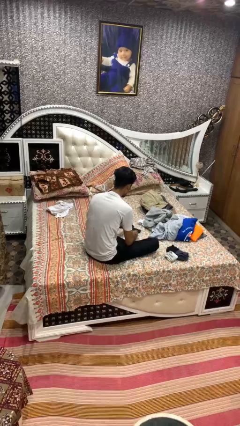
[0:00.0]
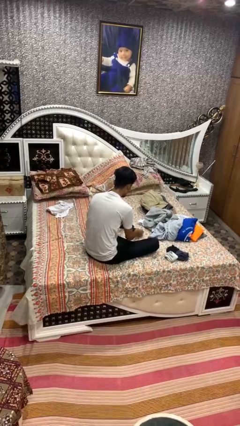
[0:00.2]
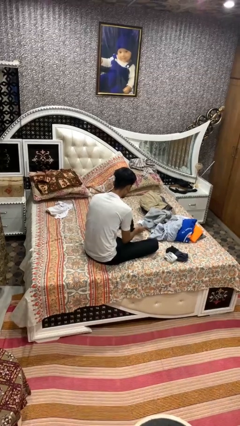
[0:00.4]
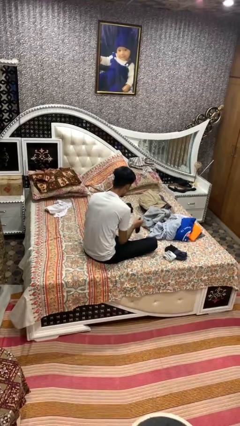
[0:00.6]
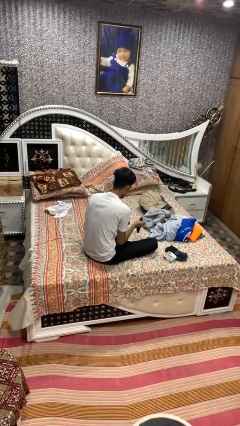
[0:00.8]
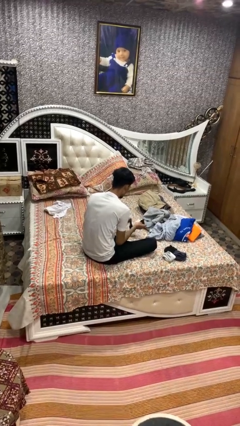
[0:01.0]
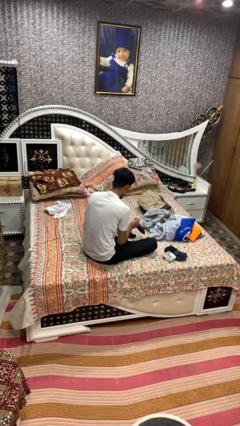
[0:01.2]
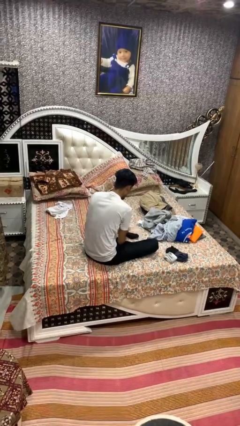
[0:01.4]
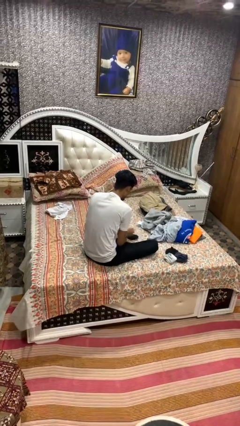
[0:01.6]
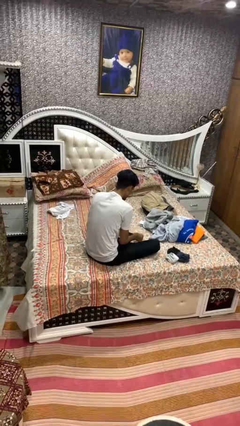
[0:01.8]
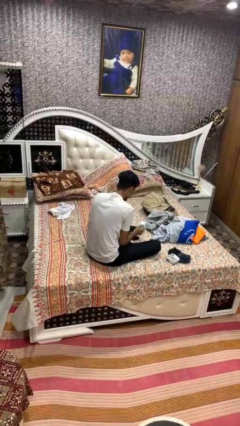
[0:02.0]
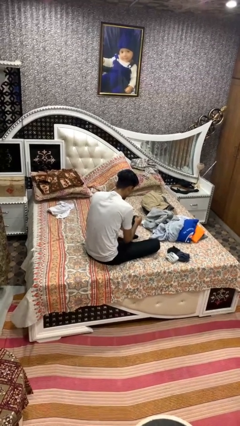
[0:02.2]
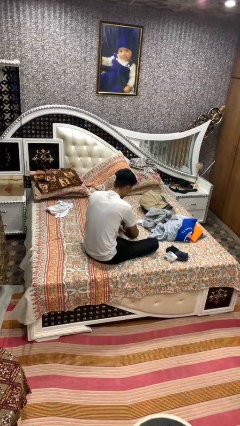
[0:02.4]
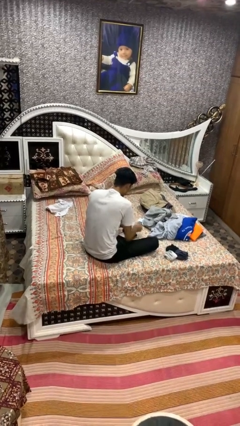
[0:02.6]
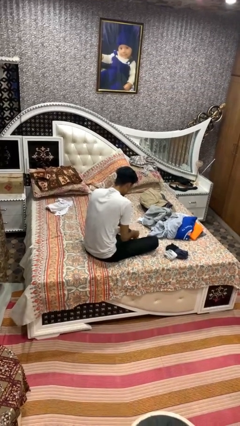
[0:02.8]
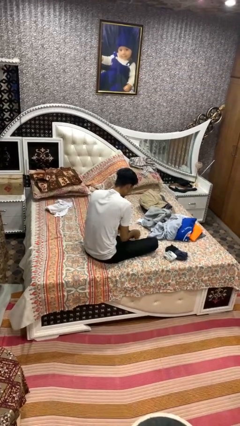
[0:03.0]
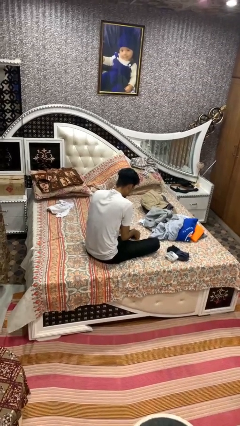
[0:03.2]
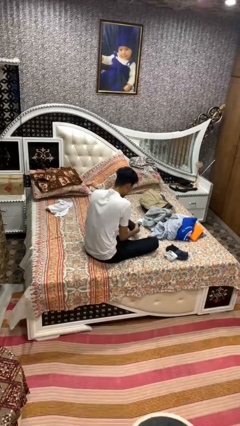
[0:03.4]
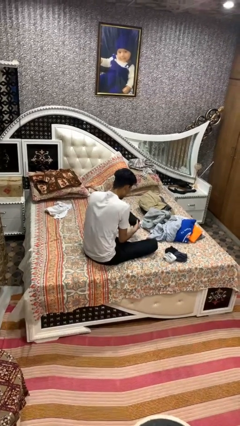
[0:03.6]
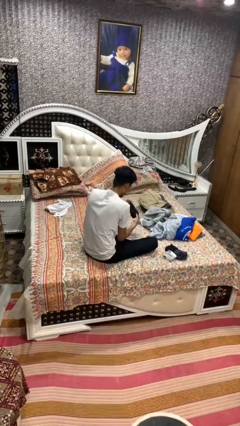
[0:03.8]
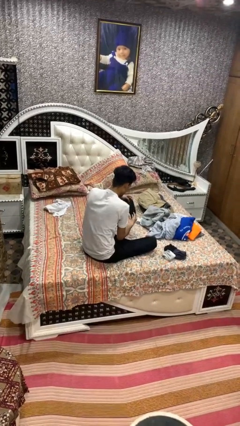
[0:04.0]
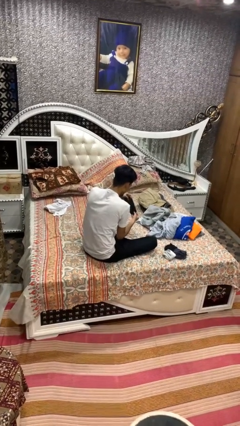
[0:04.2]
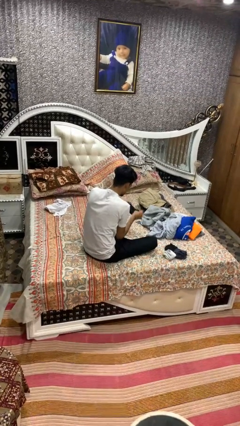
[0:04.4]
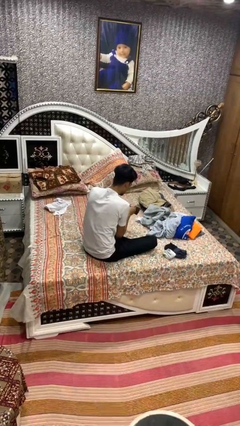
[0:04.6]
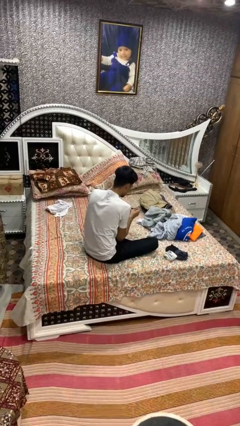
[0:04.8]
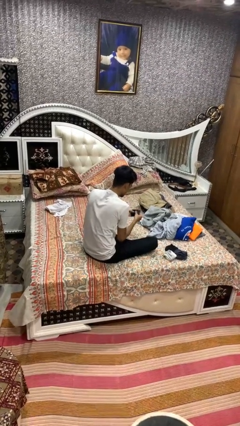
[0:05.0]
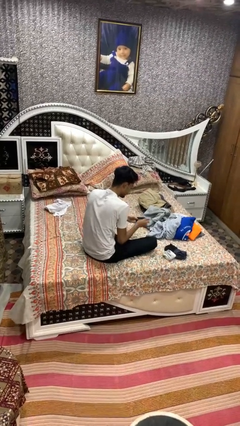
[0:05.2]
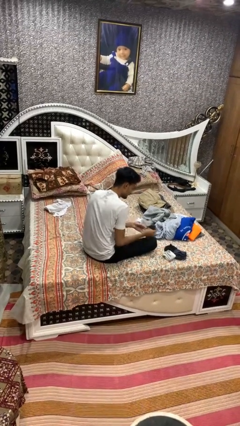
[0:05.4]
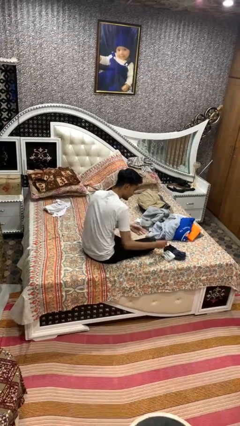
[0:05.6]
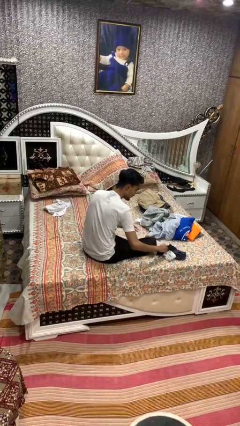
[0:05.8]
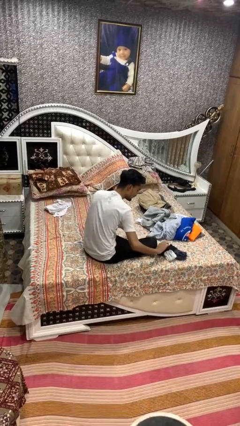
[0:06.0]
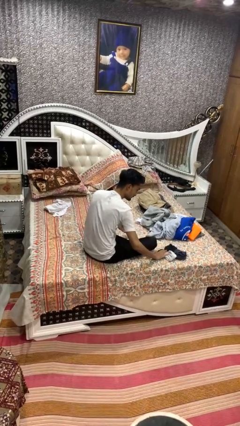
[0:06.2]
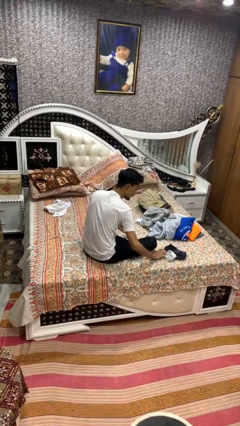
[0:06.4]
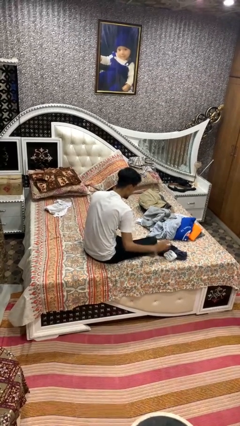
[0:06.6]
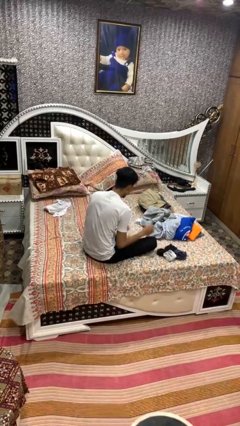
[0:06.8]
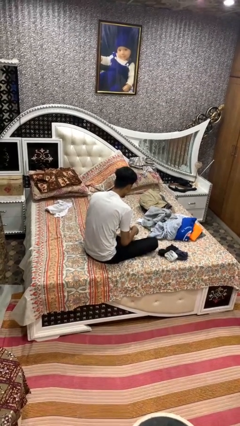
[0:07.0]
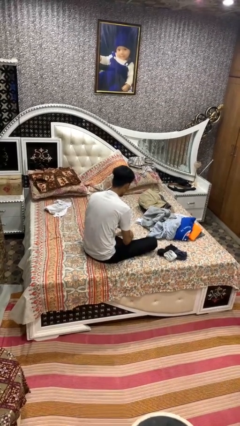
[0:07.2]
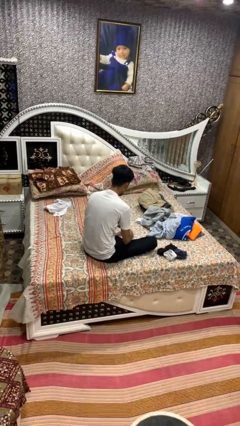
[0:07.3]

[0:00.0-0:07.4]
person folds socks

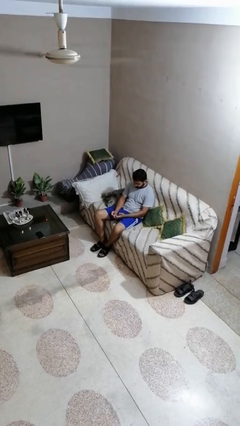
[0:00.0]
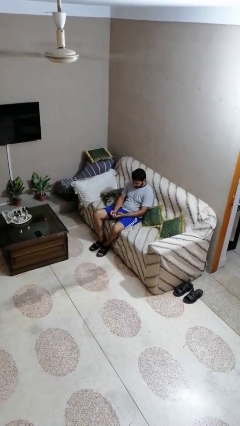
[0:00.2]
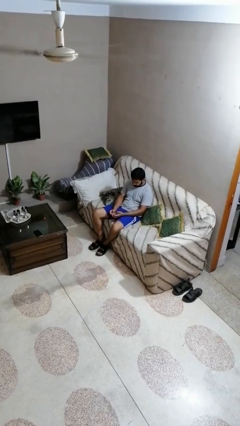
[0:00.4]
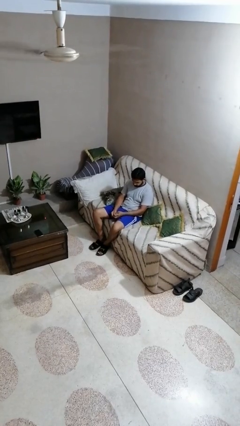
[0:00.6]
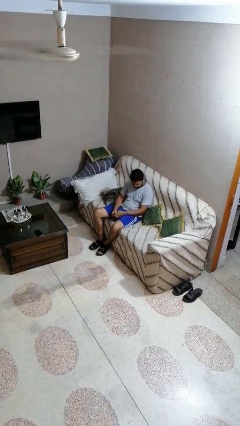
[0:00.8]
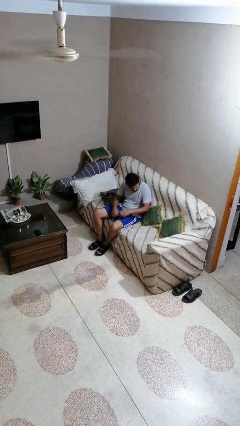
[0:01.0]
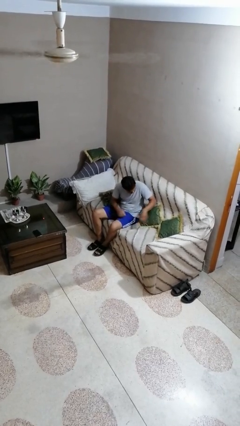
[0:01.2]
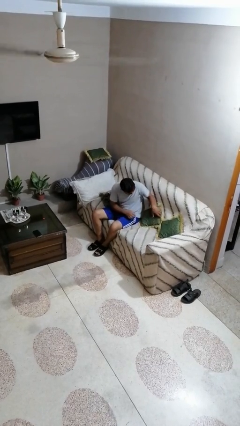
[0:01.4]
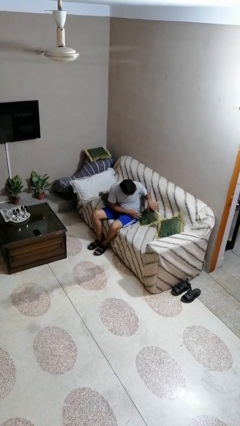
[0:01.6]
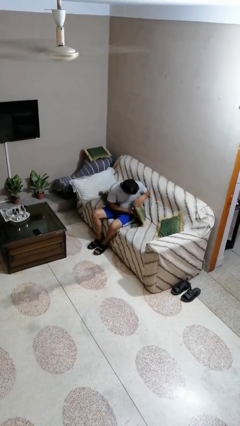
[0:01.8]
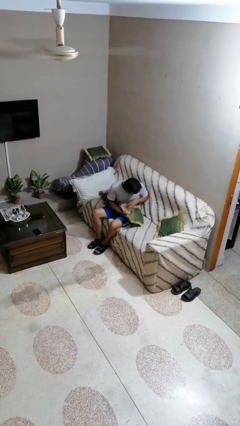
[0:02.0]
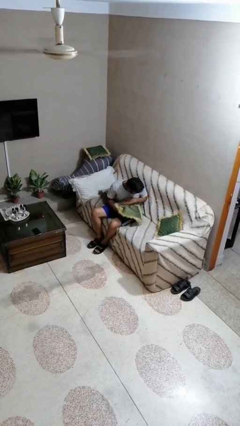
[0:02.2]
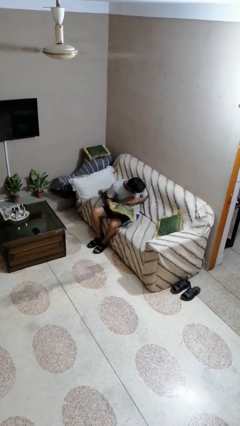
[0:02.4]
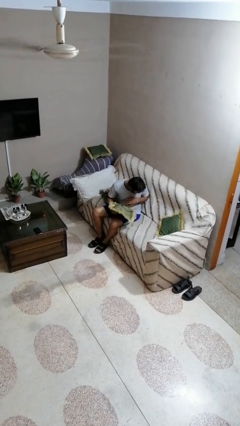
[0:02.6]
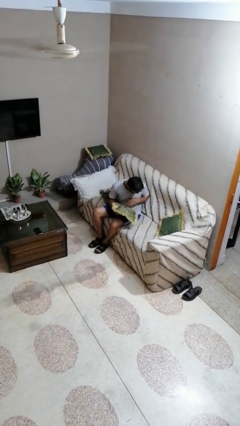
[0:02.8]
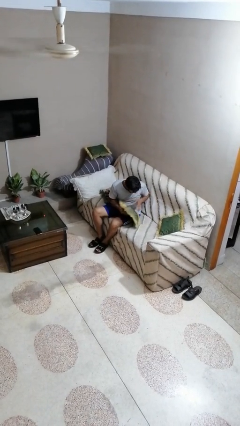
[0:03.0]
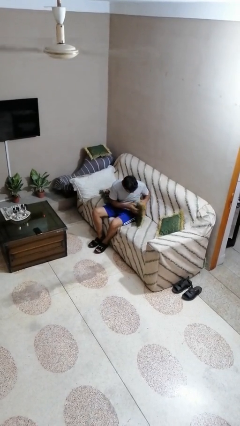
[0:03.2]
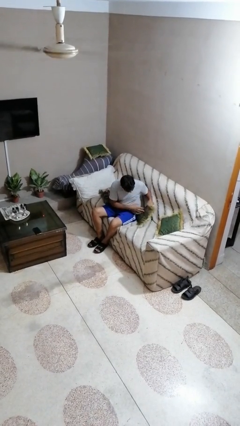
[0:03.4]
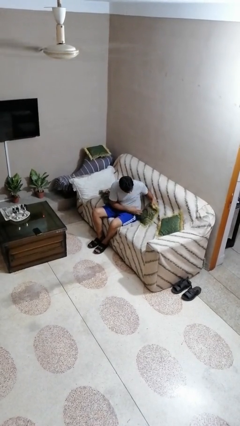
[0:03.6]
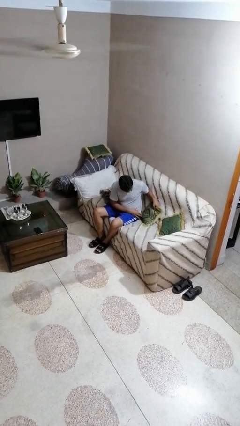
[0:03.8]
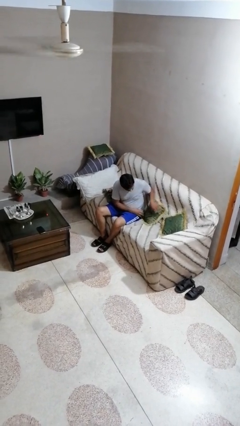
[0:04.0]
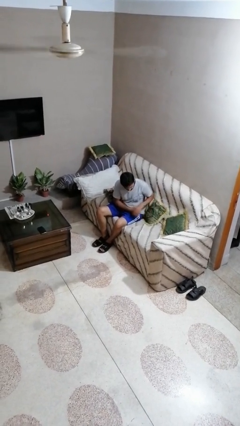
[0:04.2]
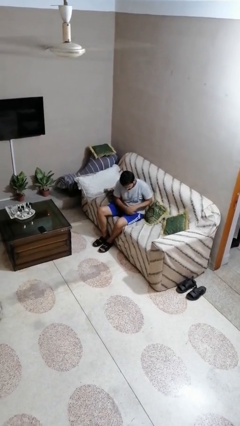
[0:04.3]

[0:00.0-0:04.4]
person searches in couch

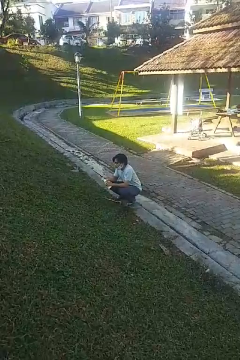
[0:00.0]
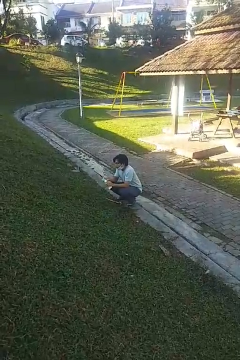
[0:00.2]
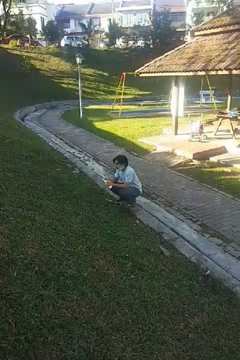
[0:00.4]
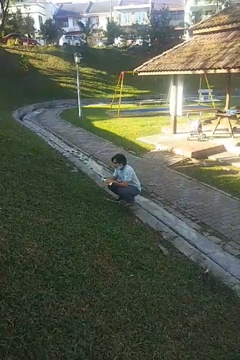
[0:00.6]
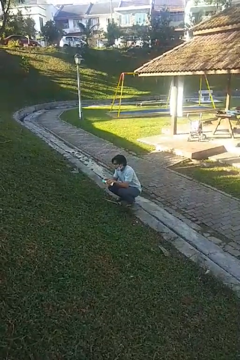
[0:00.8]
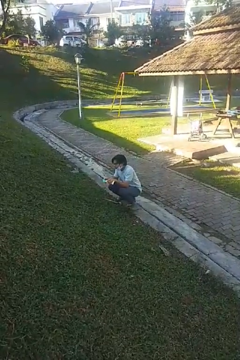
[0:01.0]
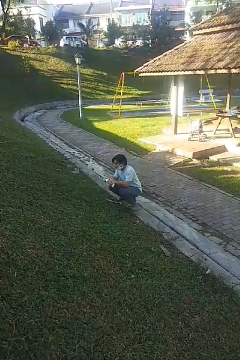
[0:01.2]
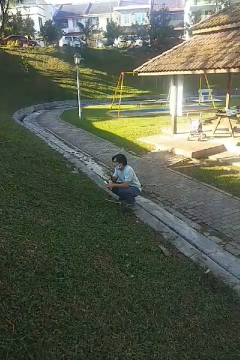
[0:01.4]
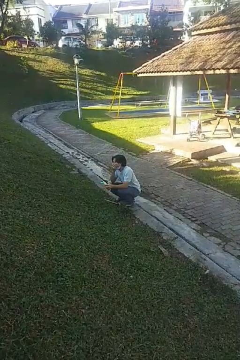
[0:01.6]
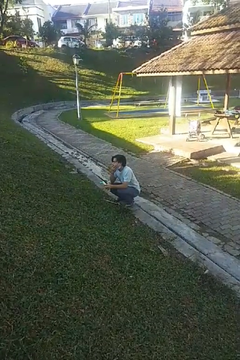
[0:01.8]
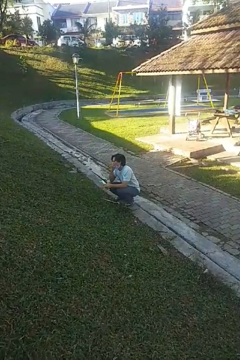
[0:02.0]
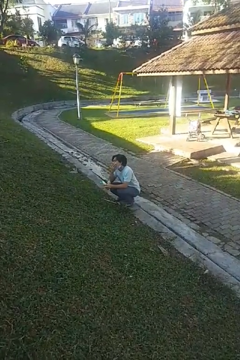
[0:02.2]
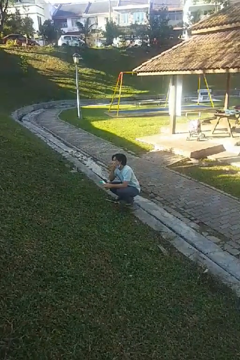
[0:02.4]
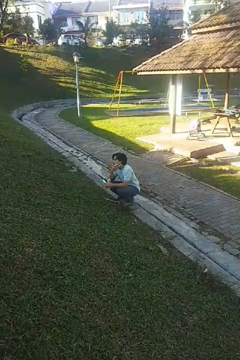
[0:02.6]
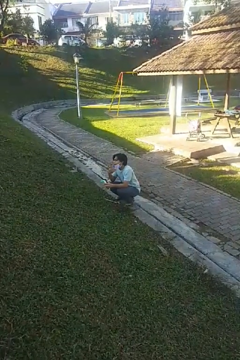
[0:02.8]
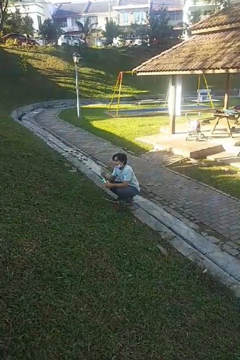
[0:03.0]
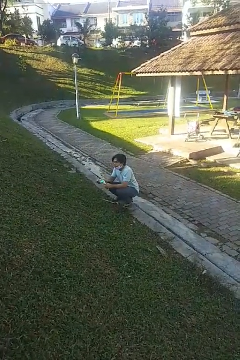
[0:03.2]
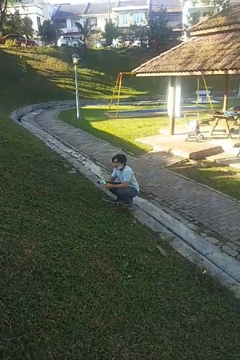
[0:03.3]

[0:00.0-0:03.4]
person applies facial moisturizer

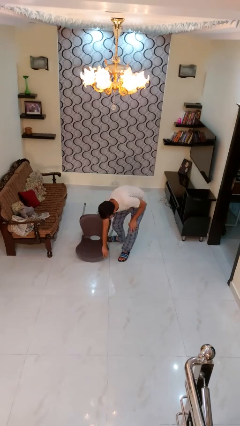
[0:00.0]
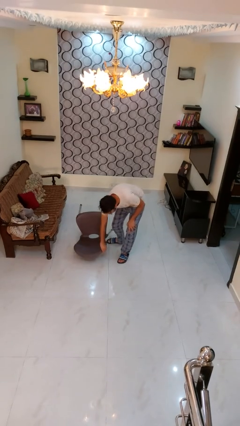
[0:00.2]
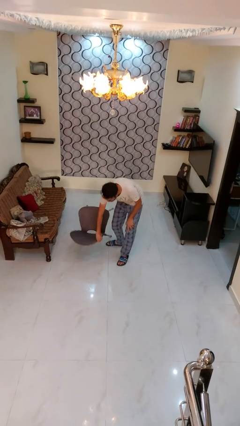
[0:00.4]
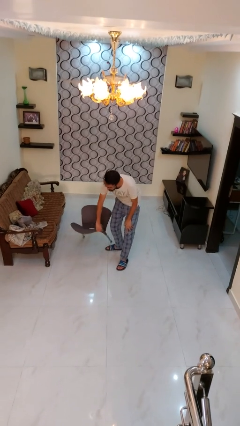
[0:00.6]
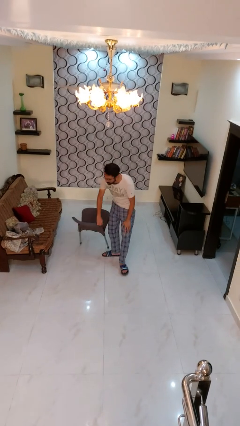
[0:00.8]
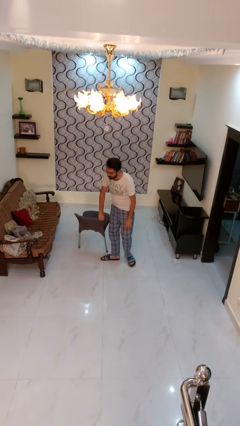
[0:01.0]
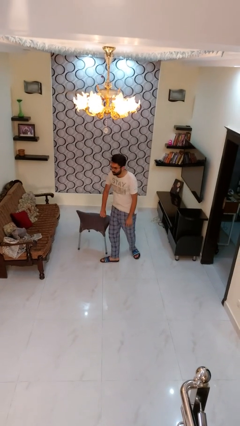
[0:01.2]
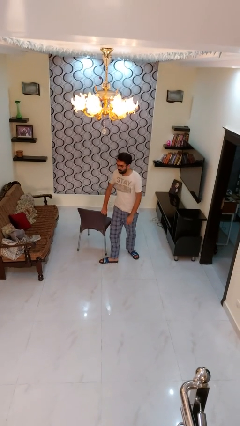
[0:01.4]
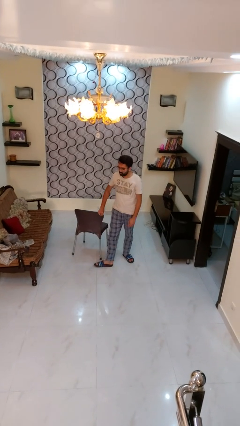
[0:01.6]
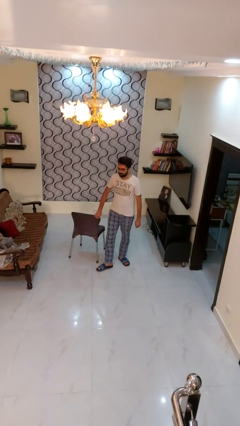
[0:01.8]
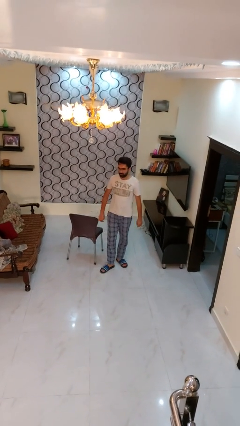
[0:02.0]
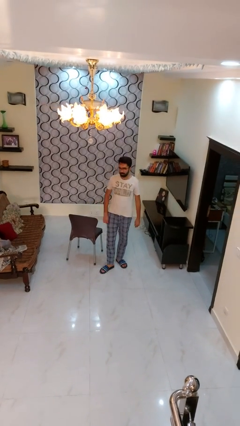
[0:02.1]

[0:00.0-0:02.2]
person sets upright furniture

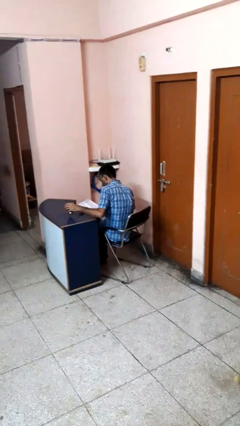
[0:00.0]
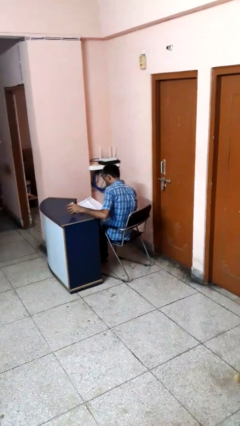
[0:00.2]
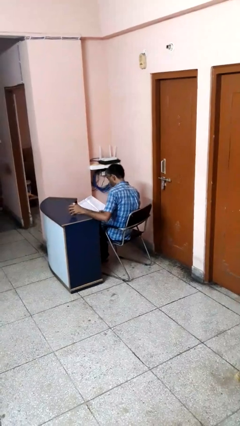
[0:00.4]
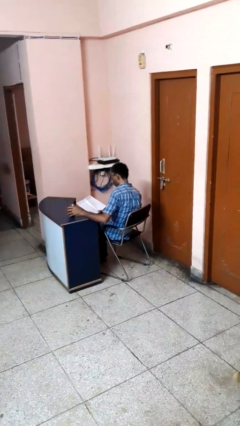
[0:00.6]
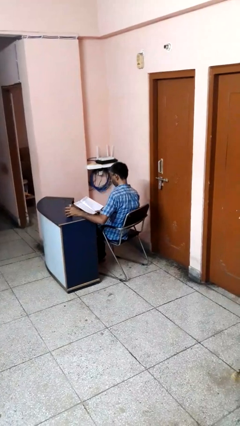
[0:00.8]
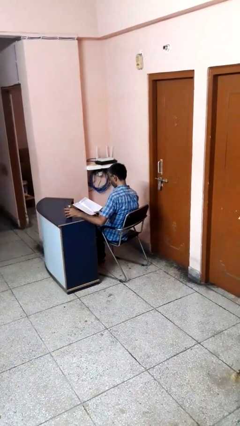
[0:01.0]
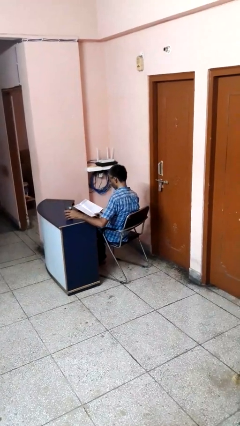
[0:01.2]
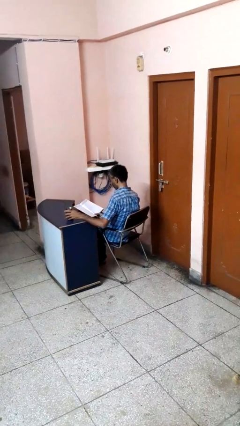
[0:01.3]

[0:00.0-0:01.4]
person sets upright glass
